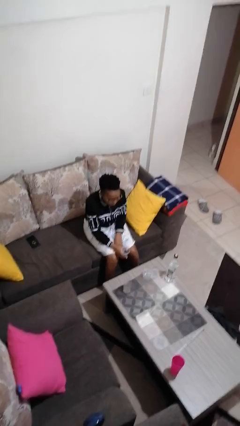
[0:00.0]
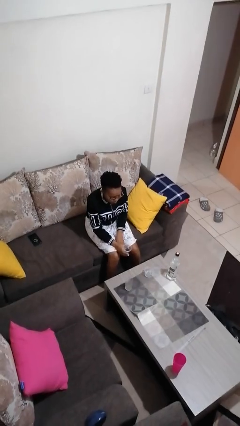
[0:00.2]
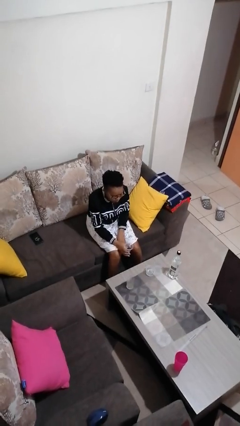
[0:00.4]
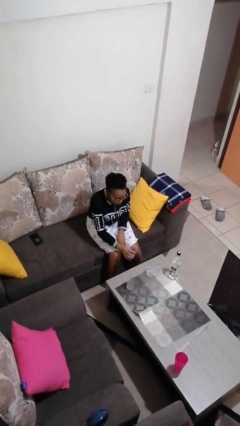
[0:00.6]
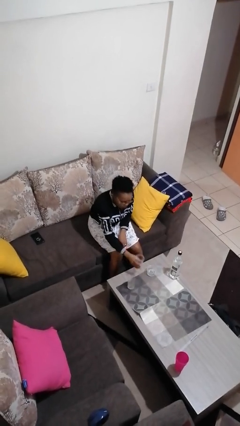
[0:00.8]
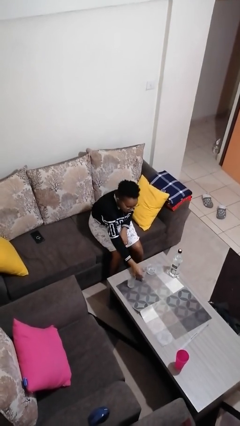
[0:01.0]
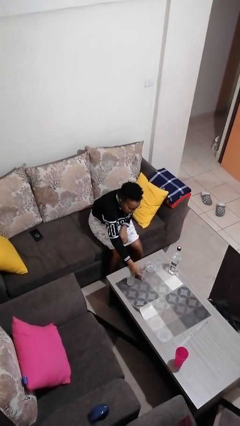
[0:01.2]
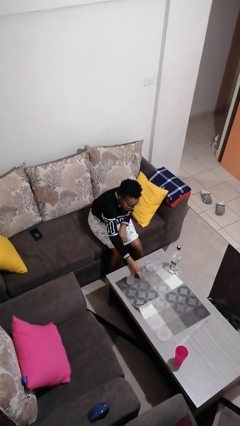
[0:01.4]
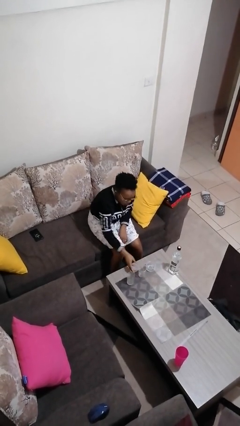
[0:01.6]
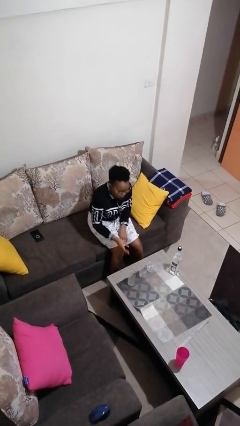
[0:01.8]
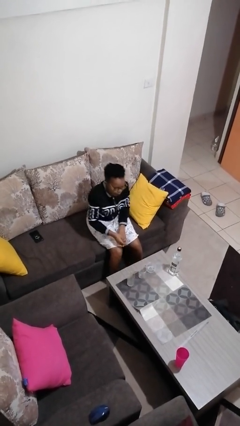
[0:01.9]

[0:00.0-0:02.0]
person puts down object on table

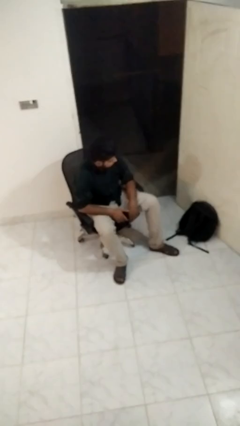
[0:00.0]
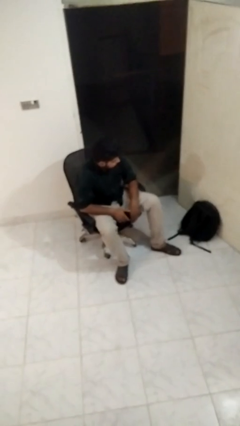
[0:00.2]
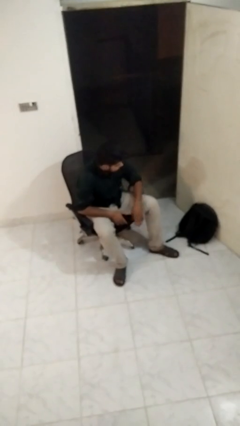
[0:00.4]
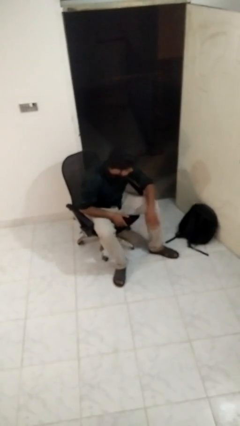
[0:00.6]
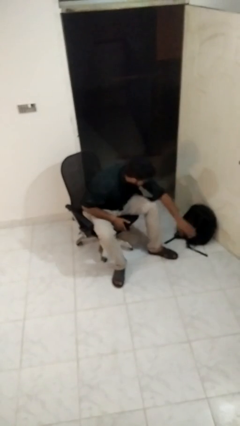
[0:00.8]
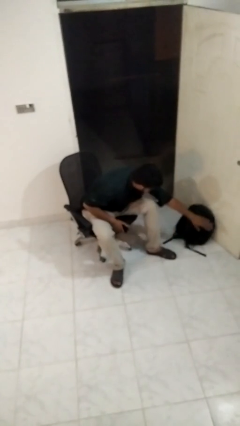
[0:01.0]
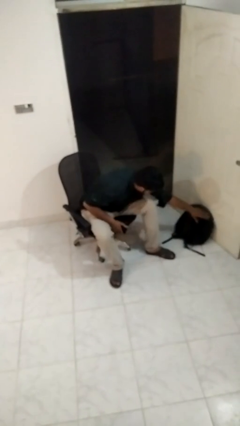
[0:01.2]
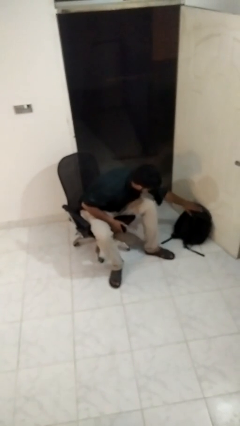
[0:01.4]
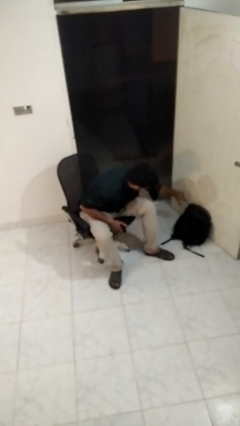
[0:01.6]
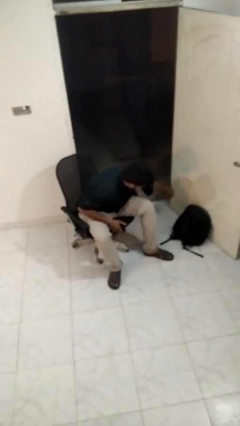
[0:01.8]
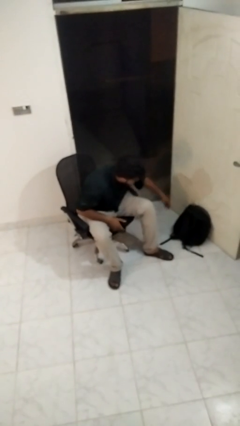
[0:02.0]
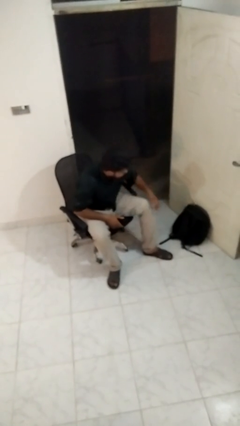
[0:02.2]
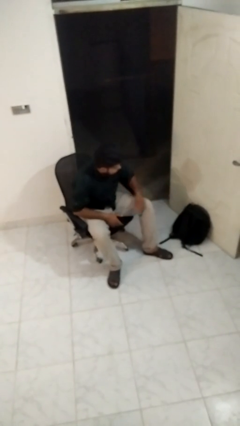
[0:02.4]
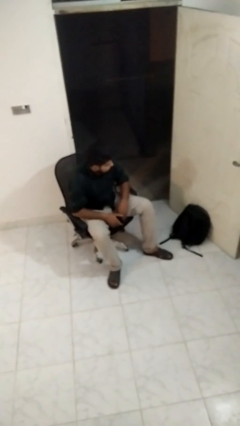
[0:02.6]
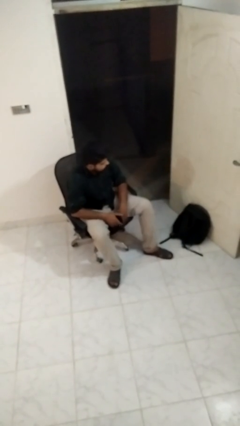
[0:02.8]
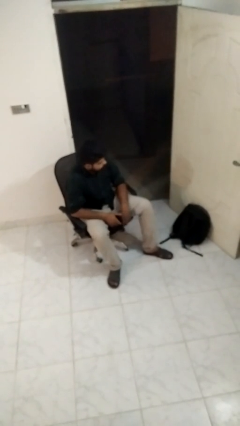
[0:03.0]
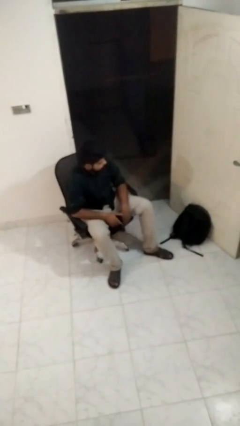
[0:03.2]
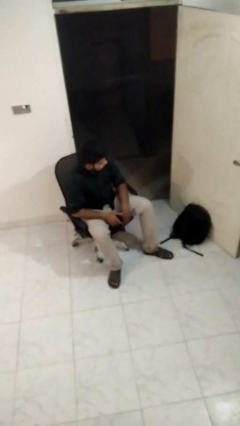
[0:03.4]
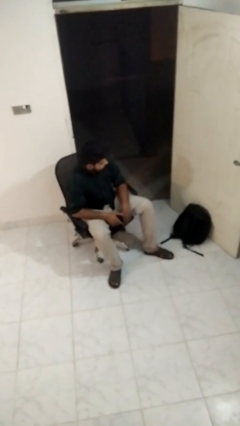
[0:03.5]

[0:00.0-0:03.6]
person waves hand over object

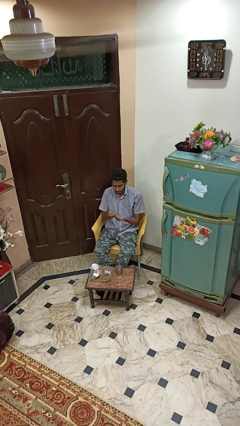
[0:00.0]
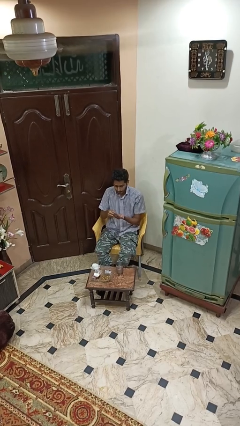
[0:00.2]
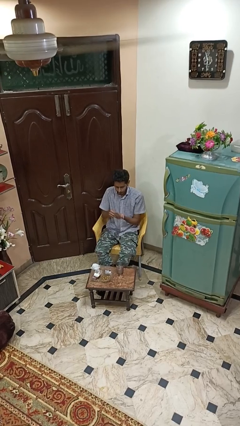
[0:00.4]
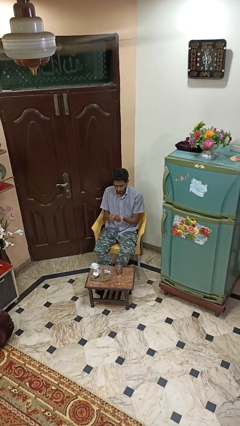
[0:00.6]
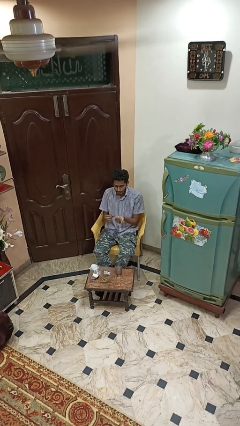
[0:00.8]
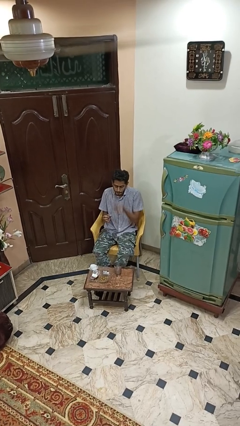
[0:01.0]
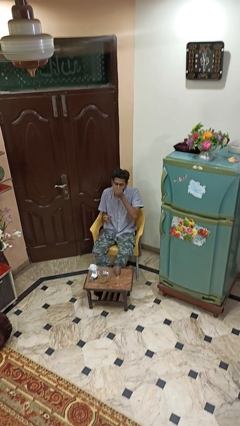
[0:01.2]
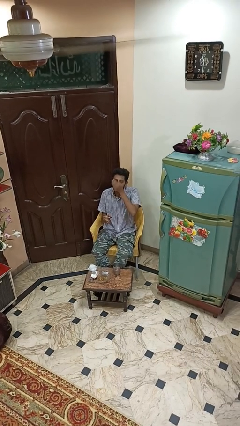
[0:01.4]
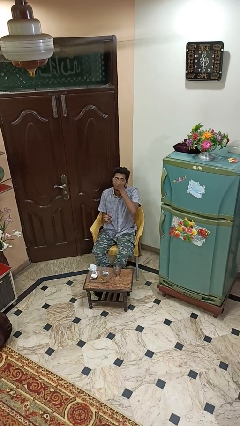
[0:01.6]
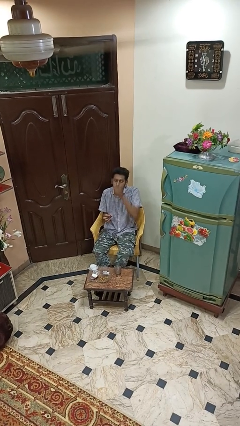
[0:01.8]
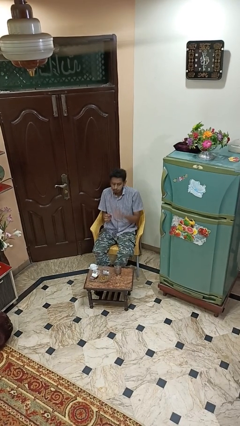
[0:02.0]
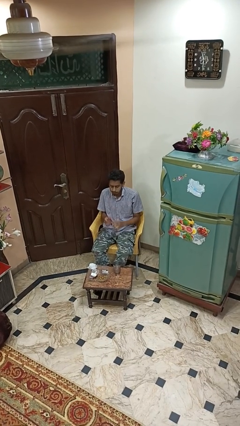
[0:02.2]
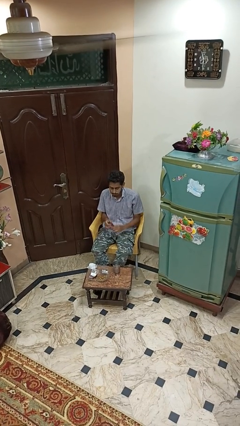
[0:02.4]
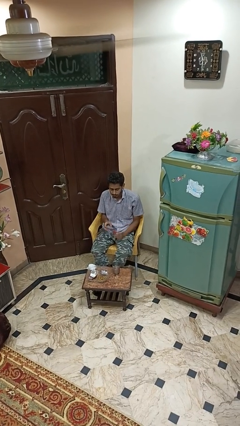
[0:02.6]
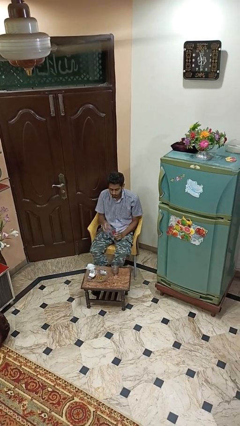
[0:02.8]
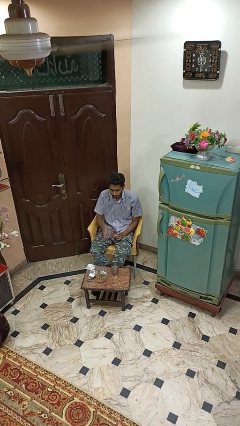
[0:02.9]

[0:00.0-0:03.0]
person takes medicine pills

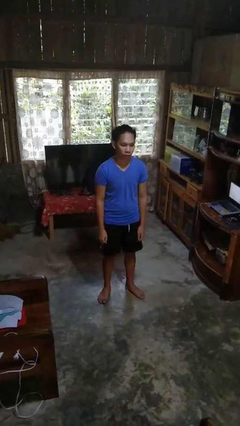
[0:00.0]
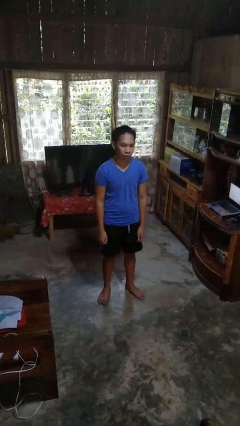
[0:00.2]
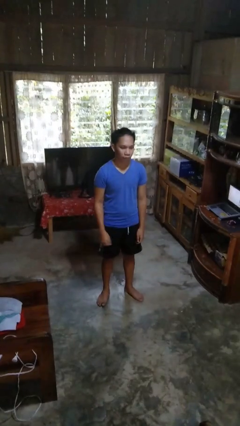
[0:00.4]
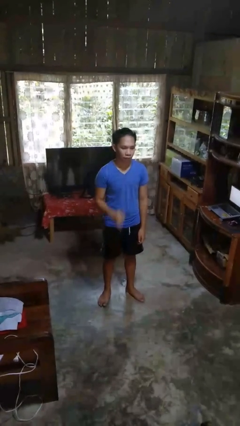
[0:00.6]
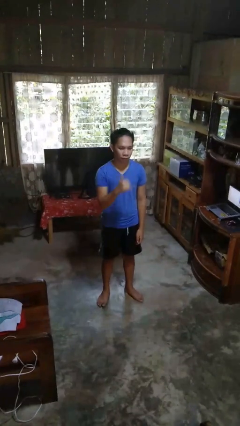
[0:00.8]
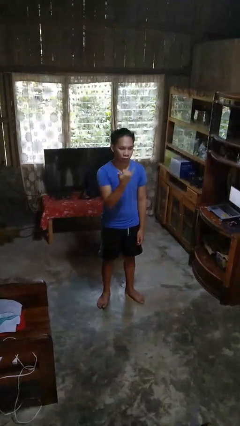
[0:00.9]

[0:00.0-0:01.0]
person gestures hang loose

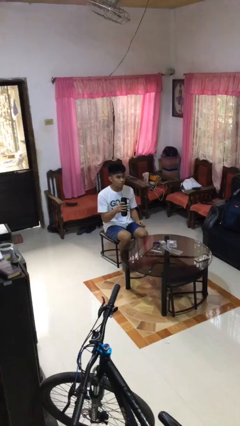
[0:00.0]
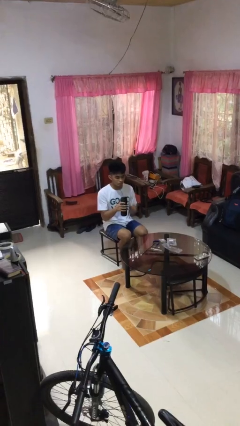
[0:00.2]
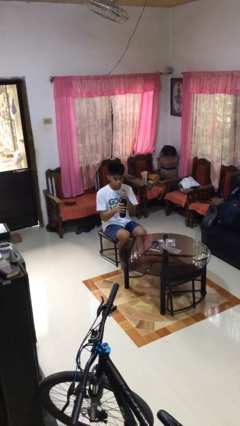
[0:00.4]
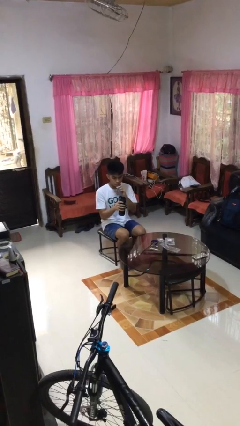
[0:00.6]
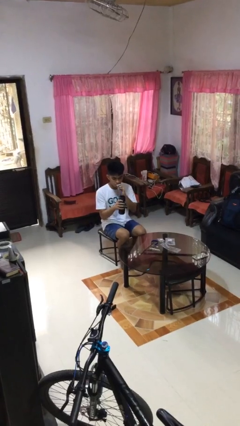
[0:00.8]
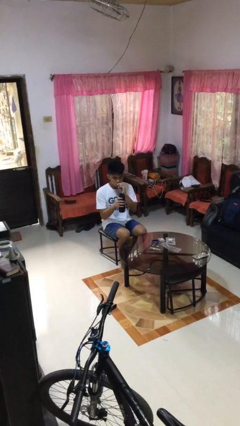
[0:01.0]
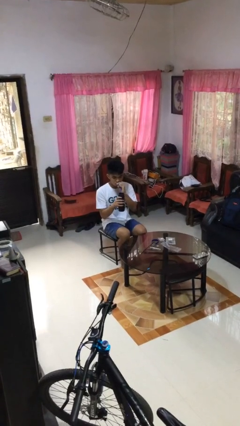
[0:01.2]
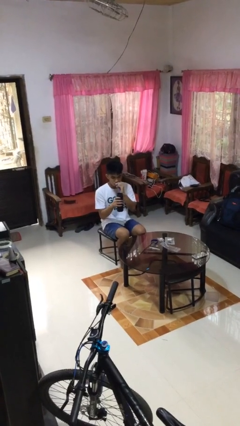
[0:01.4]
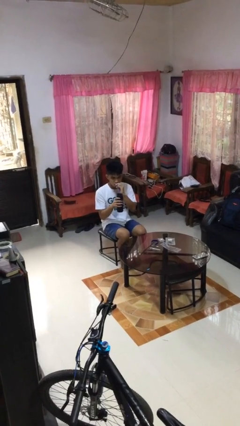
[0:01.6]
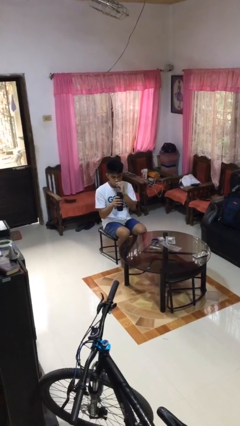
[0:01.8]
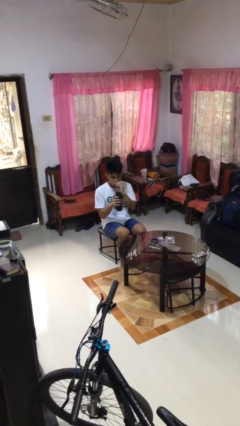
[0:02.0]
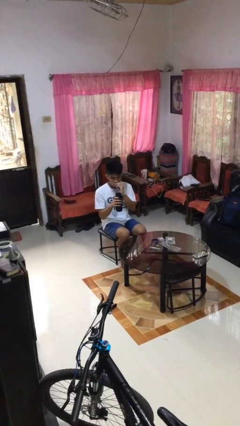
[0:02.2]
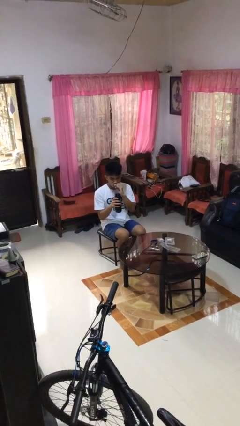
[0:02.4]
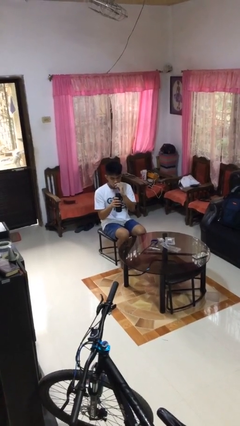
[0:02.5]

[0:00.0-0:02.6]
person drinks from straw

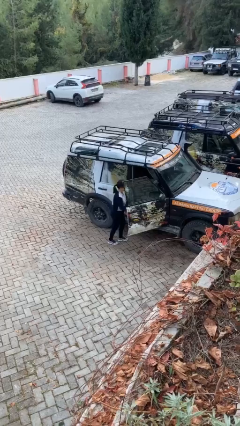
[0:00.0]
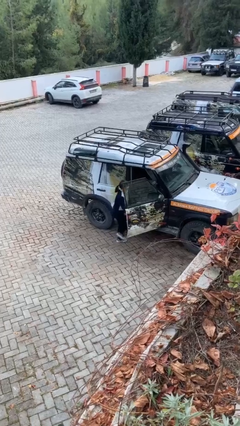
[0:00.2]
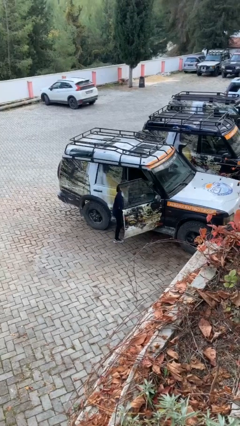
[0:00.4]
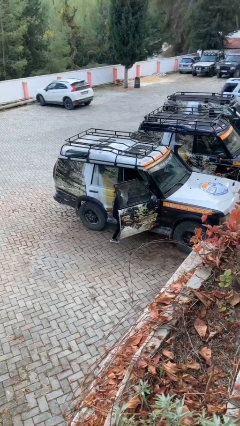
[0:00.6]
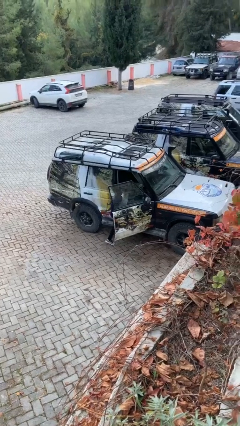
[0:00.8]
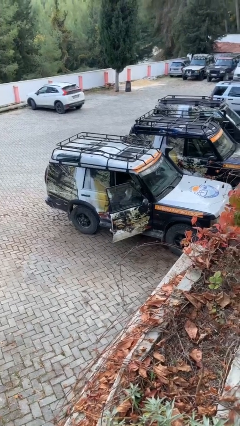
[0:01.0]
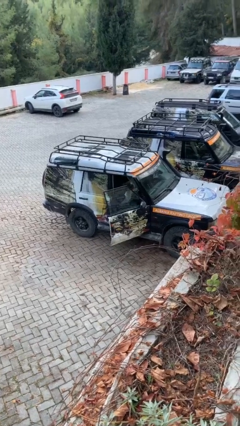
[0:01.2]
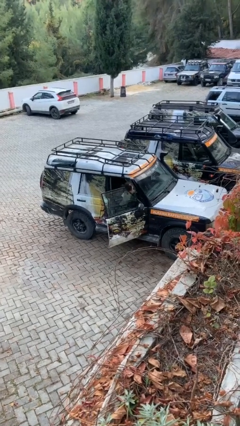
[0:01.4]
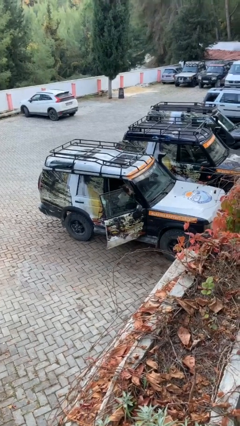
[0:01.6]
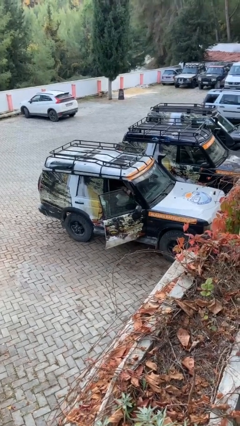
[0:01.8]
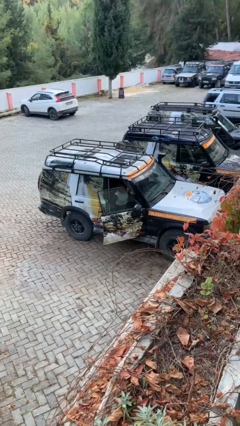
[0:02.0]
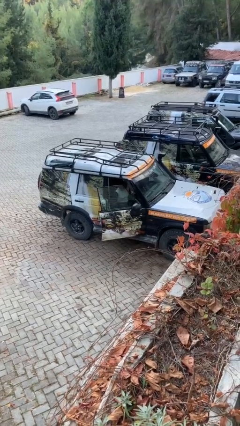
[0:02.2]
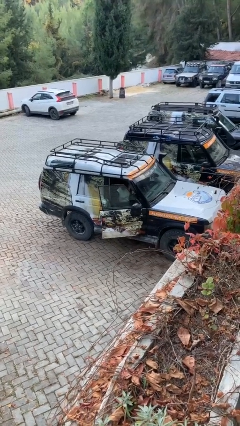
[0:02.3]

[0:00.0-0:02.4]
person enters car

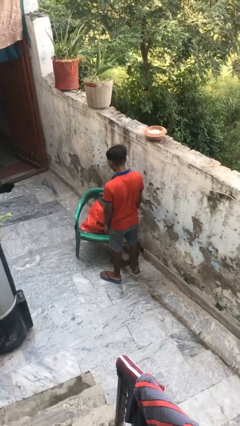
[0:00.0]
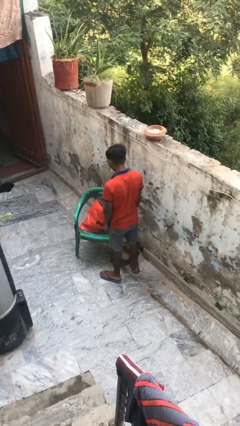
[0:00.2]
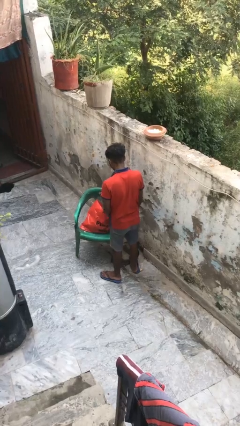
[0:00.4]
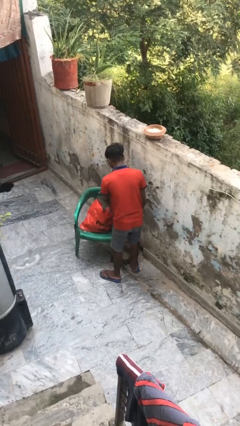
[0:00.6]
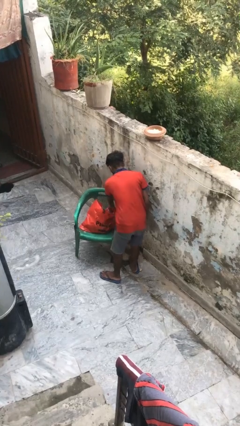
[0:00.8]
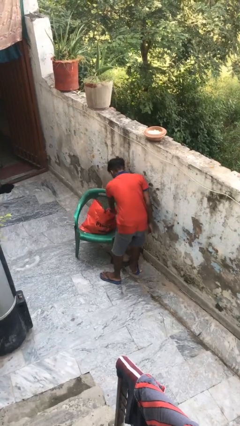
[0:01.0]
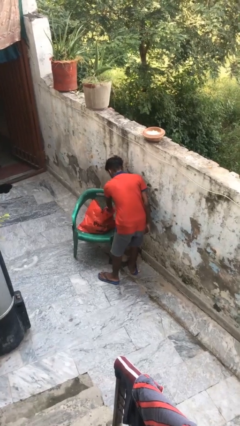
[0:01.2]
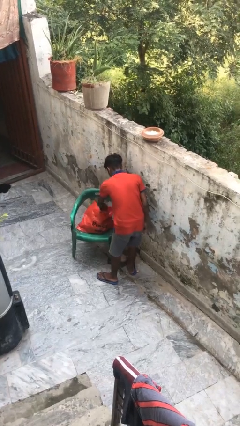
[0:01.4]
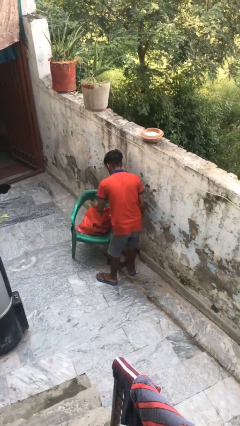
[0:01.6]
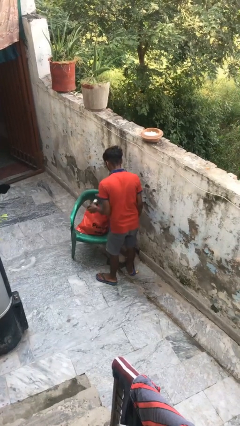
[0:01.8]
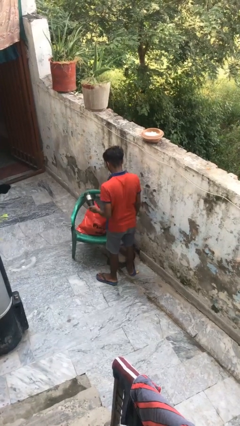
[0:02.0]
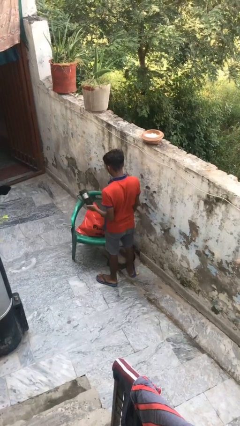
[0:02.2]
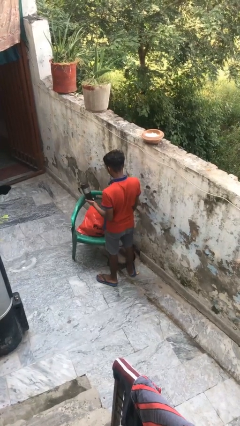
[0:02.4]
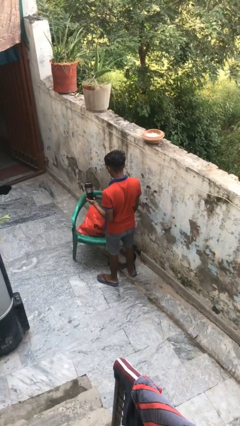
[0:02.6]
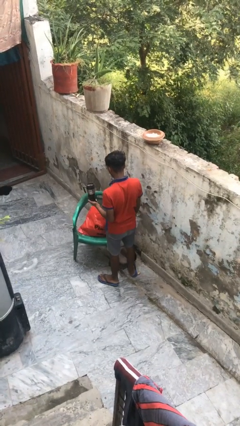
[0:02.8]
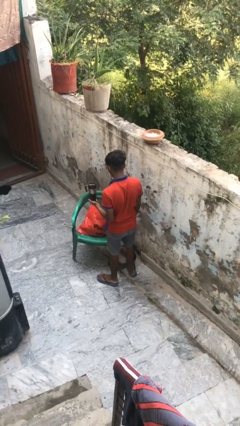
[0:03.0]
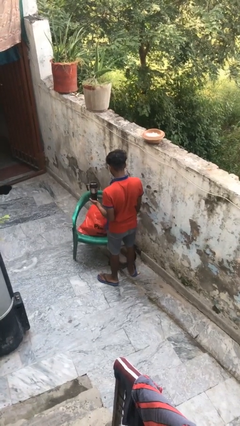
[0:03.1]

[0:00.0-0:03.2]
person takes object from bag
